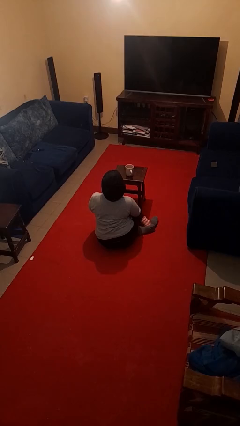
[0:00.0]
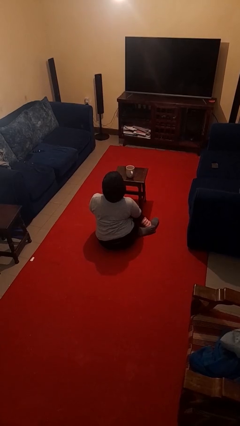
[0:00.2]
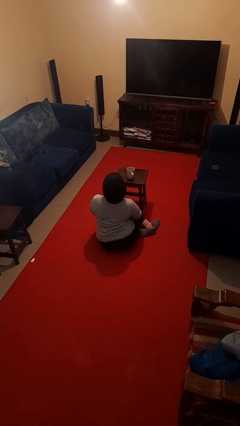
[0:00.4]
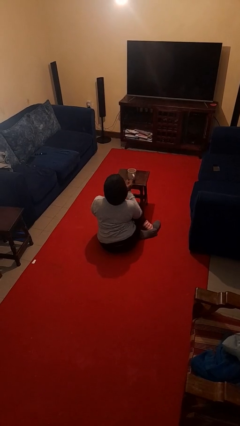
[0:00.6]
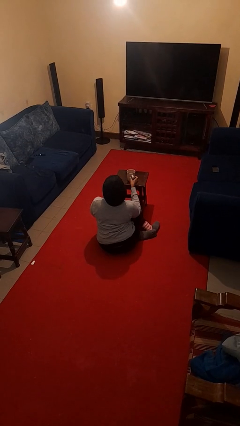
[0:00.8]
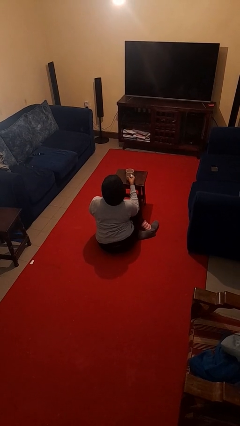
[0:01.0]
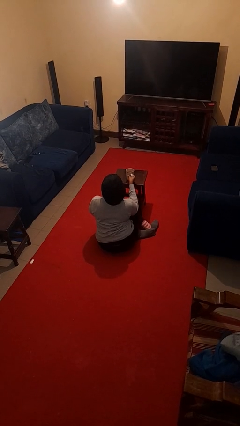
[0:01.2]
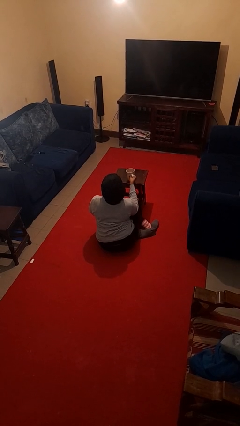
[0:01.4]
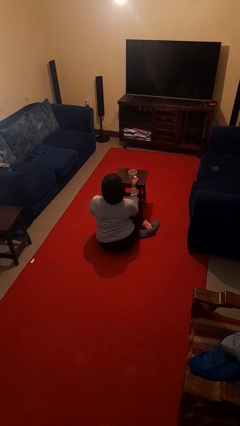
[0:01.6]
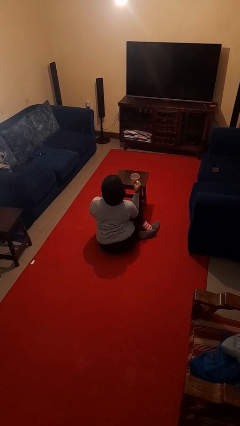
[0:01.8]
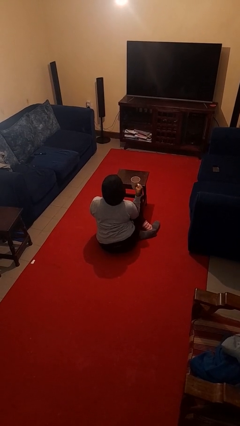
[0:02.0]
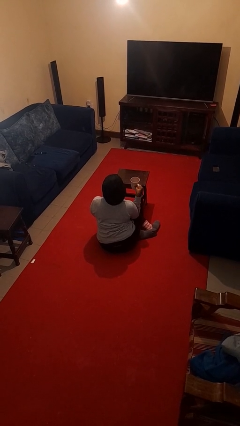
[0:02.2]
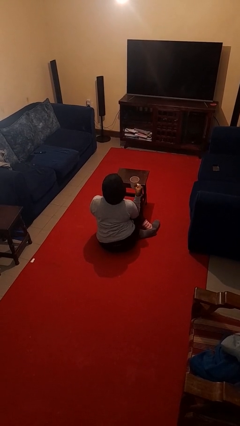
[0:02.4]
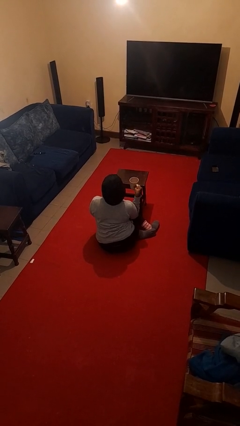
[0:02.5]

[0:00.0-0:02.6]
person picks up object from table

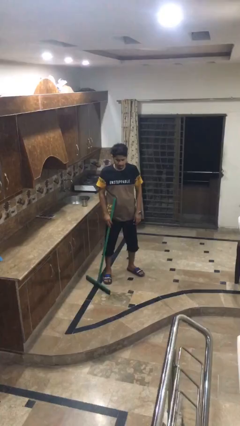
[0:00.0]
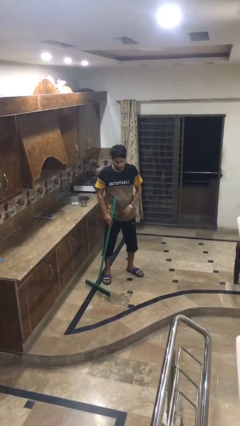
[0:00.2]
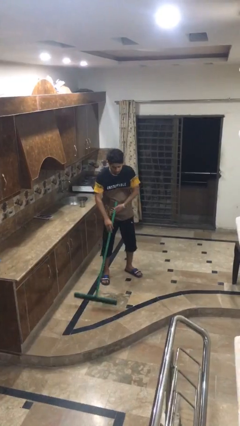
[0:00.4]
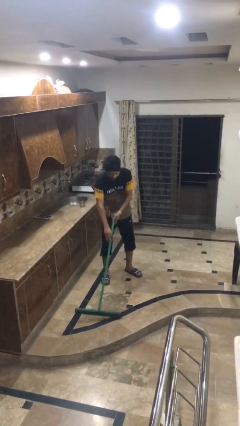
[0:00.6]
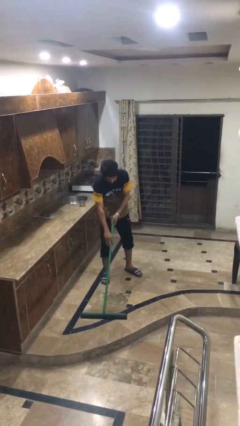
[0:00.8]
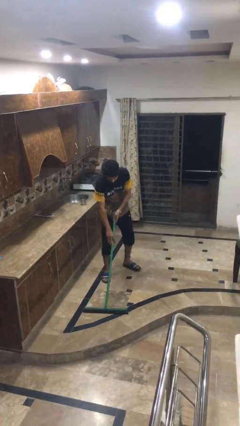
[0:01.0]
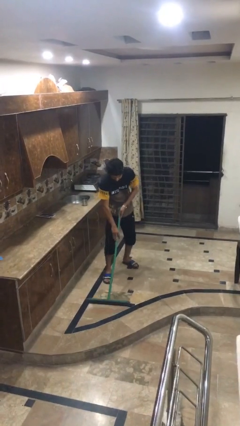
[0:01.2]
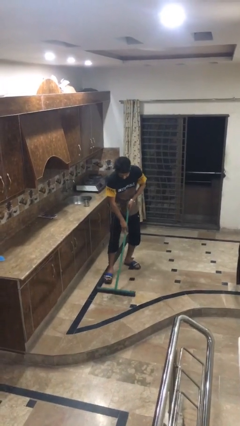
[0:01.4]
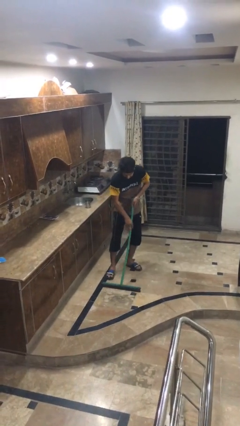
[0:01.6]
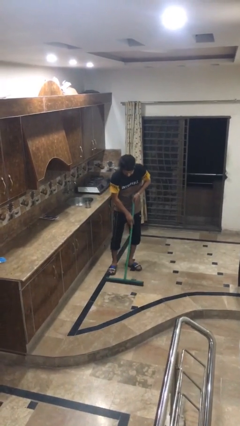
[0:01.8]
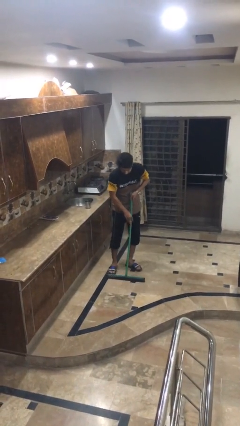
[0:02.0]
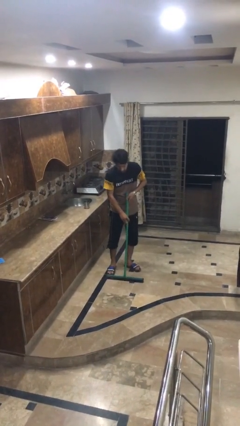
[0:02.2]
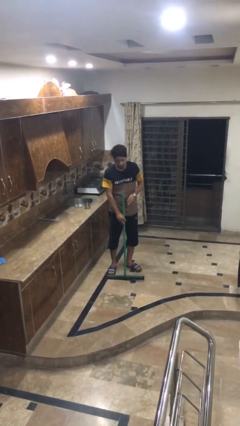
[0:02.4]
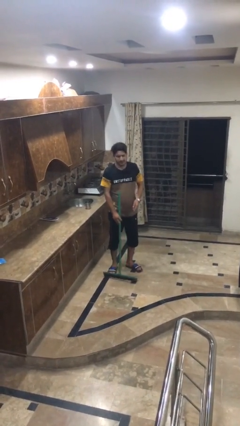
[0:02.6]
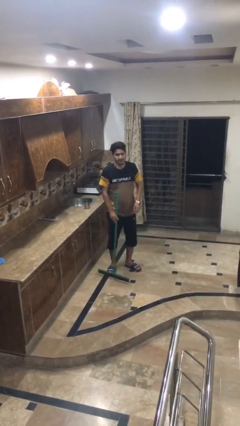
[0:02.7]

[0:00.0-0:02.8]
person mops

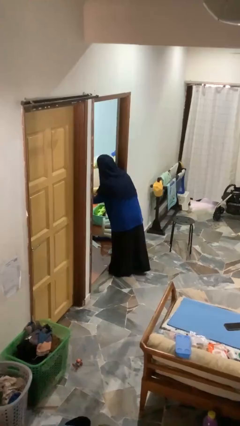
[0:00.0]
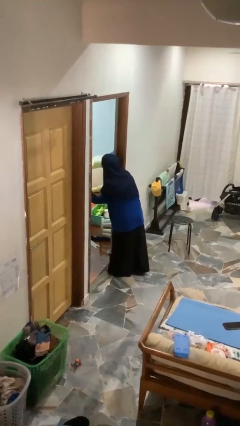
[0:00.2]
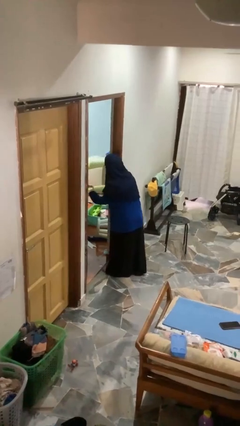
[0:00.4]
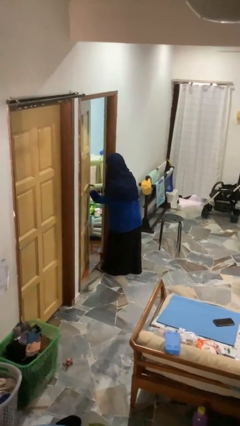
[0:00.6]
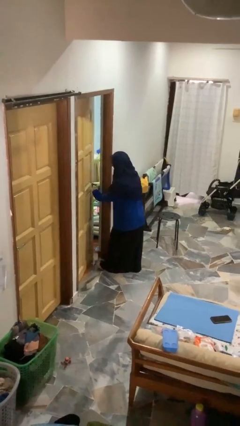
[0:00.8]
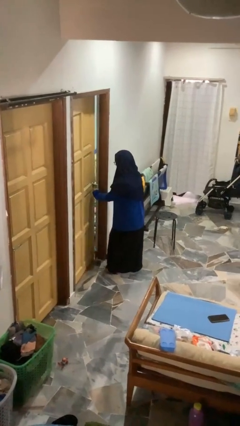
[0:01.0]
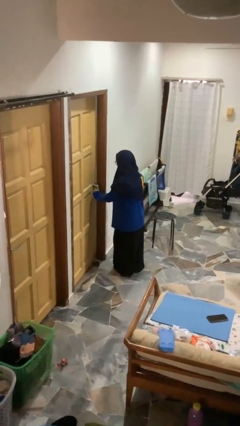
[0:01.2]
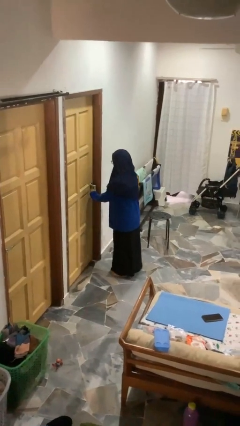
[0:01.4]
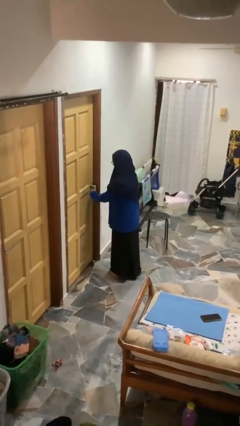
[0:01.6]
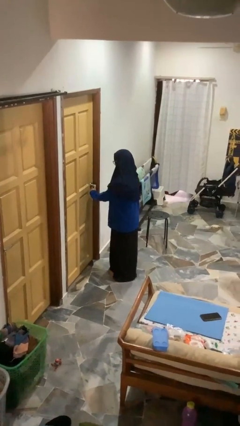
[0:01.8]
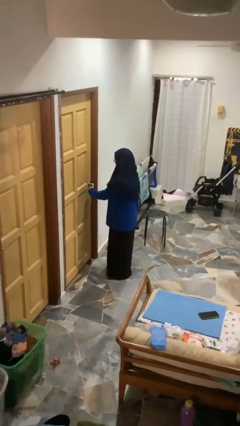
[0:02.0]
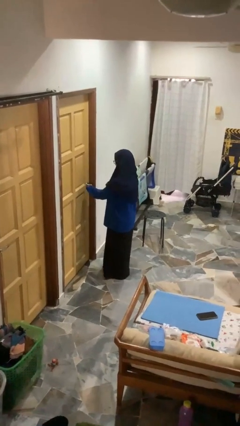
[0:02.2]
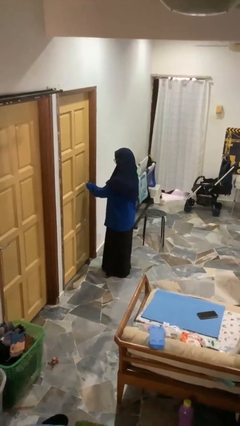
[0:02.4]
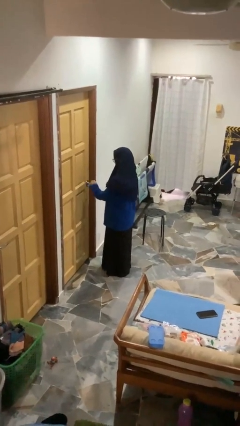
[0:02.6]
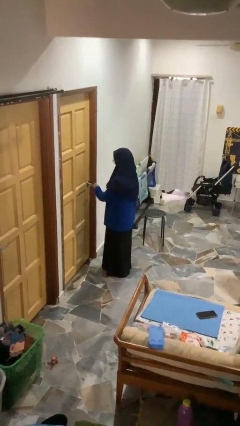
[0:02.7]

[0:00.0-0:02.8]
person closes facility door

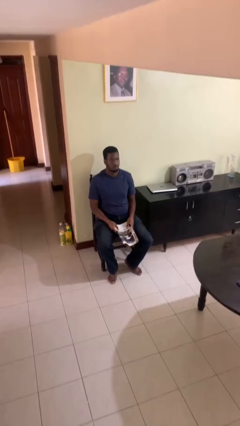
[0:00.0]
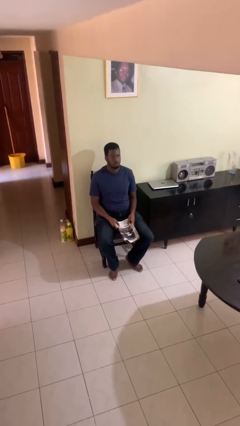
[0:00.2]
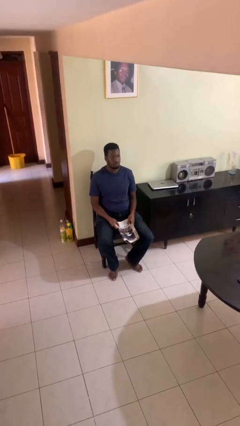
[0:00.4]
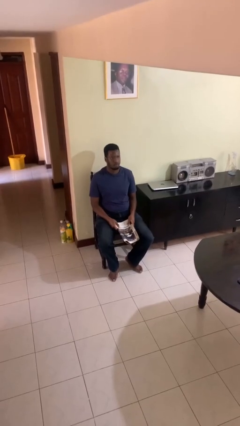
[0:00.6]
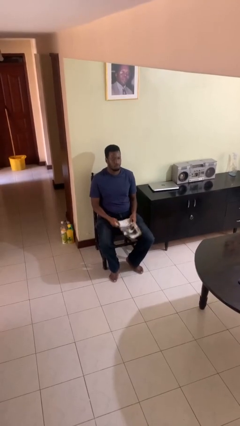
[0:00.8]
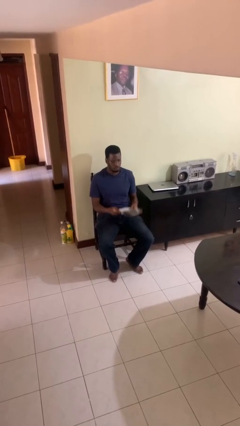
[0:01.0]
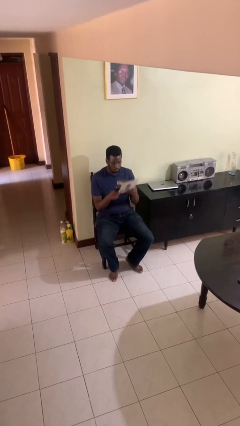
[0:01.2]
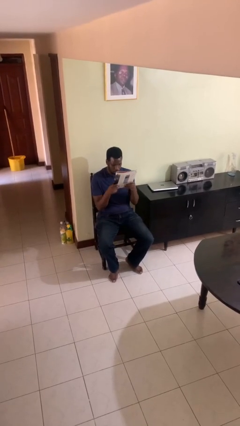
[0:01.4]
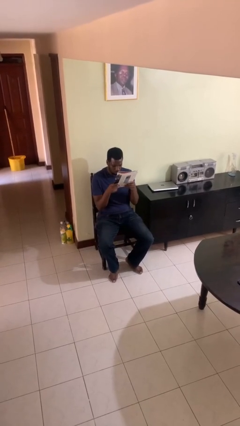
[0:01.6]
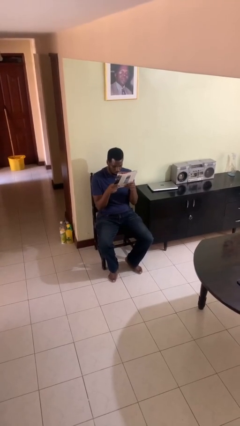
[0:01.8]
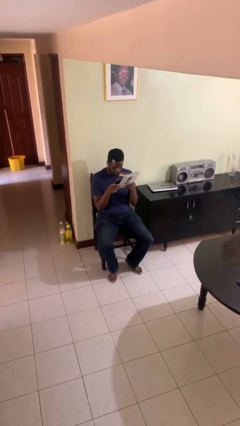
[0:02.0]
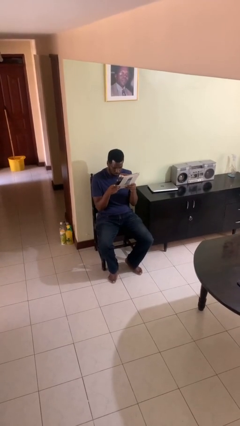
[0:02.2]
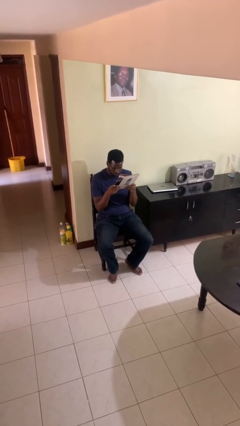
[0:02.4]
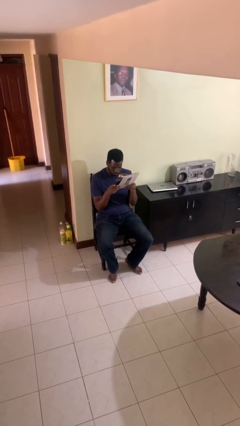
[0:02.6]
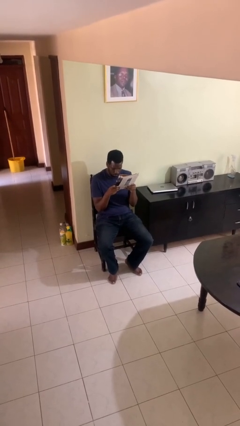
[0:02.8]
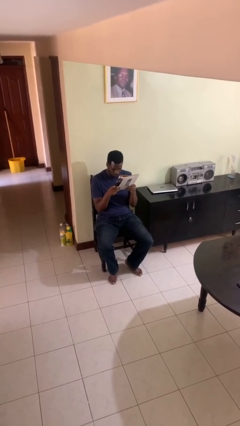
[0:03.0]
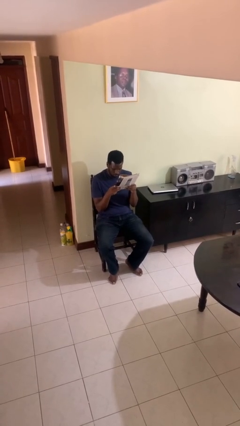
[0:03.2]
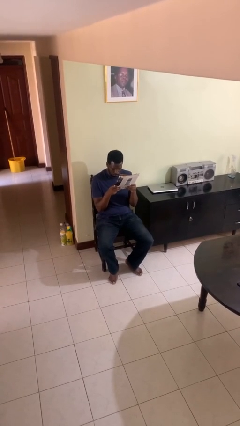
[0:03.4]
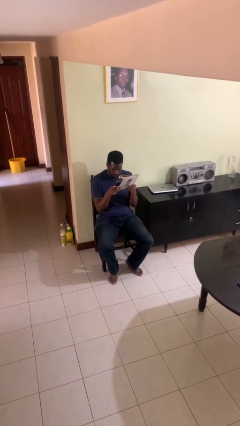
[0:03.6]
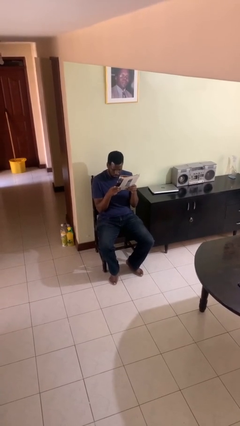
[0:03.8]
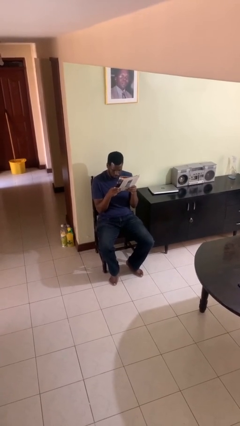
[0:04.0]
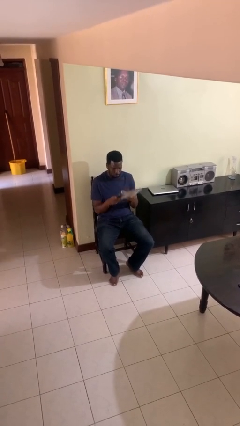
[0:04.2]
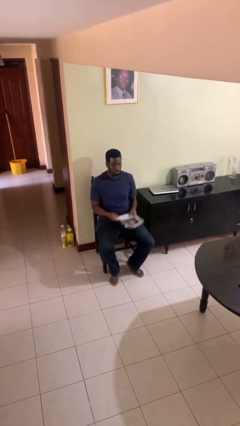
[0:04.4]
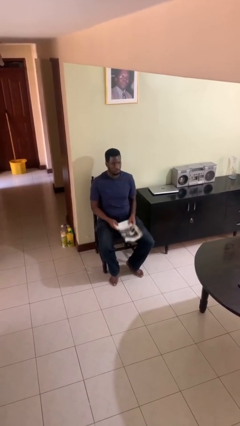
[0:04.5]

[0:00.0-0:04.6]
person reads document

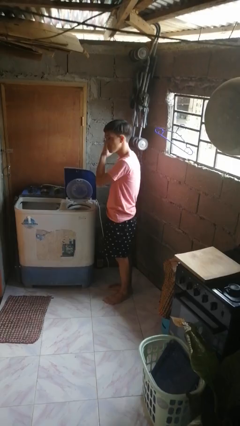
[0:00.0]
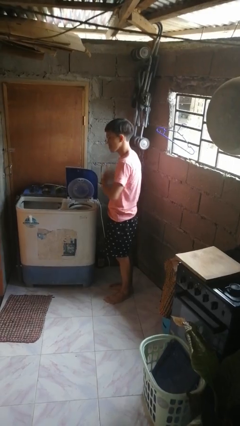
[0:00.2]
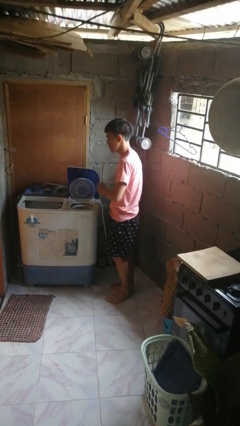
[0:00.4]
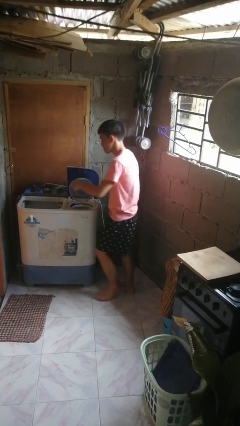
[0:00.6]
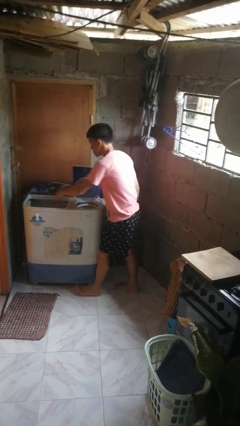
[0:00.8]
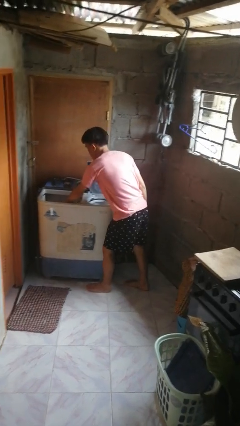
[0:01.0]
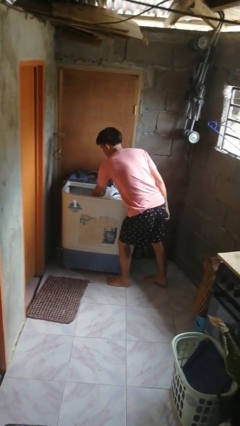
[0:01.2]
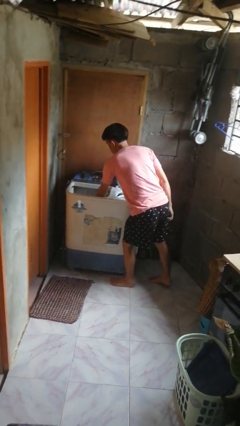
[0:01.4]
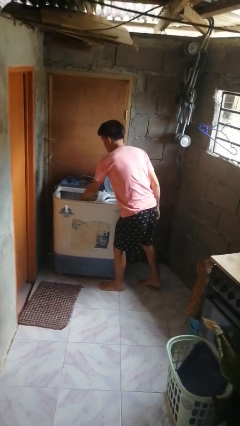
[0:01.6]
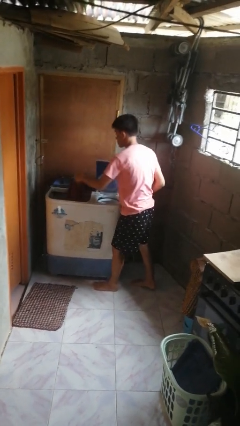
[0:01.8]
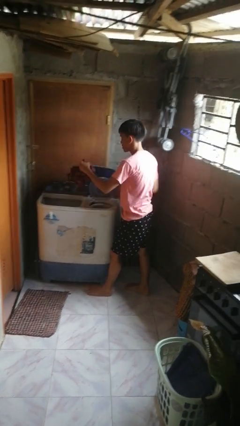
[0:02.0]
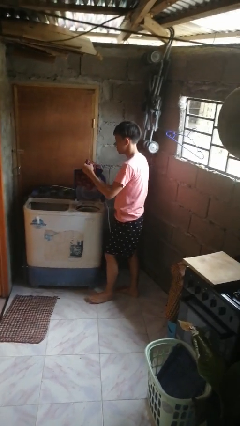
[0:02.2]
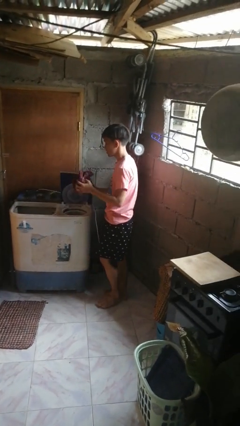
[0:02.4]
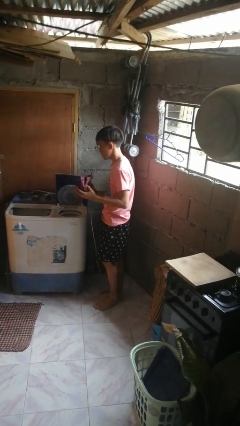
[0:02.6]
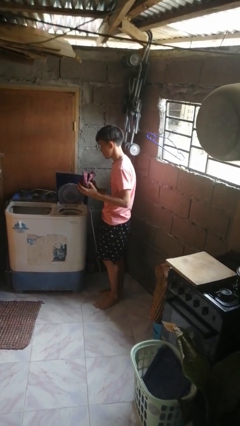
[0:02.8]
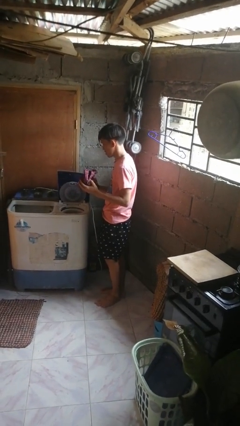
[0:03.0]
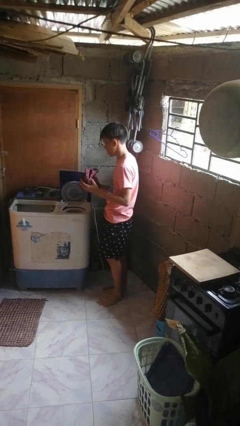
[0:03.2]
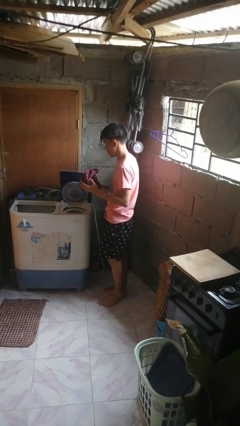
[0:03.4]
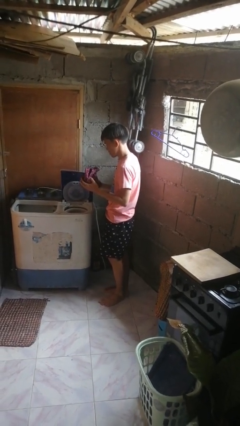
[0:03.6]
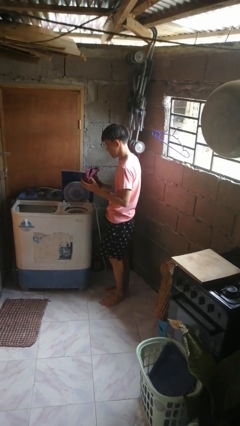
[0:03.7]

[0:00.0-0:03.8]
person unloads clotheswasher

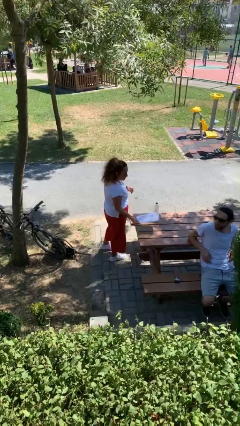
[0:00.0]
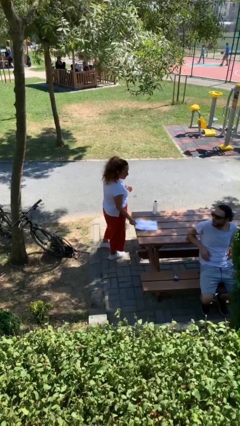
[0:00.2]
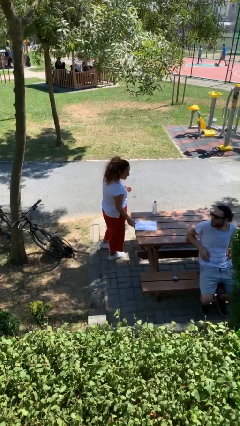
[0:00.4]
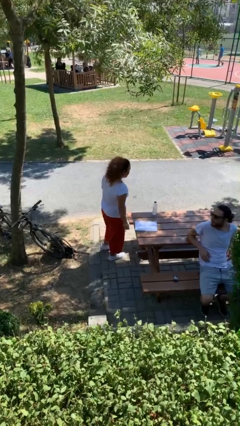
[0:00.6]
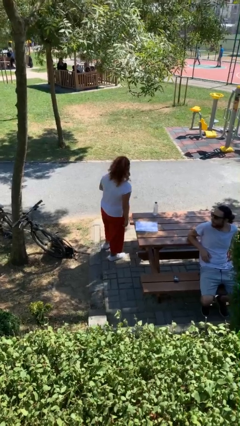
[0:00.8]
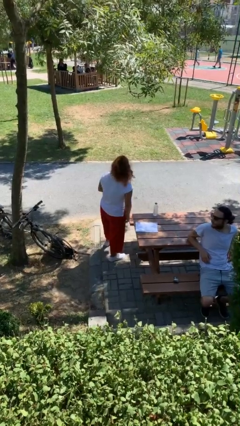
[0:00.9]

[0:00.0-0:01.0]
person puts down object on table
